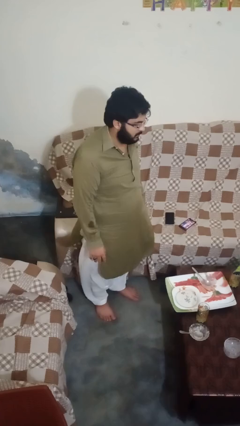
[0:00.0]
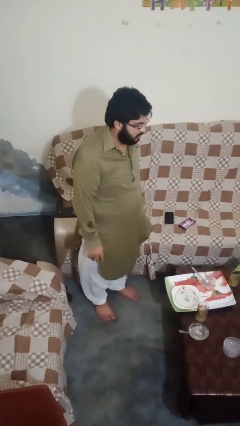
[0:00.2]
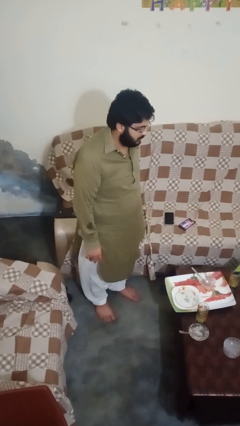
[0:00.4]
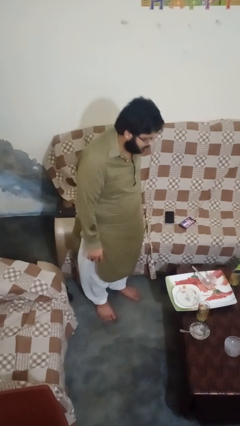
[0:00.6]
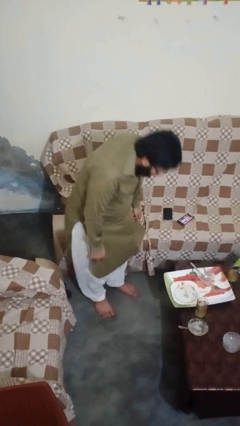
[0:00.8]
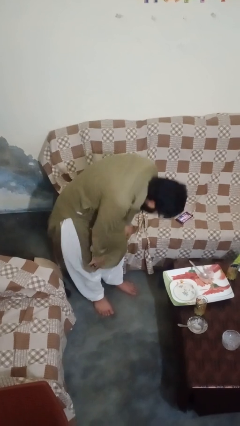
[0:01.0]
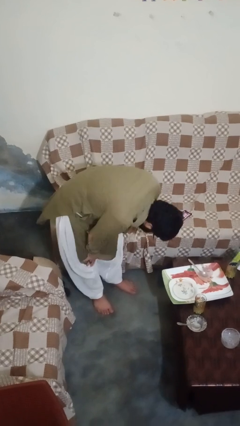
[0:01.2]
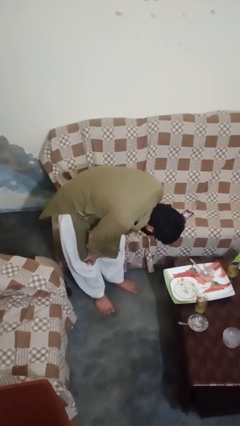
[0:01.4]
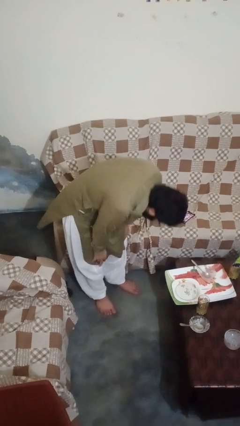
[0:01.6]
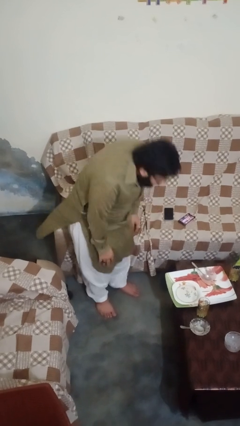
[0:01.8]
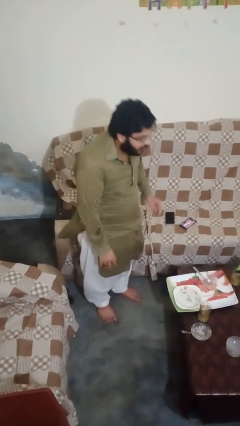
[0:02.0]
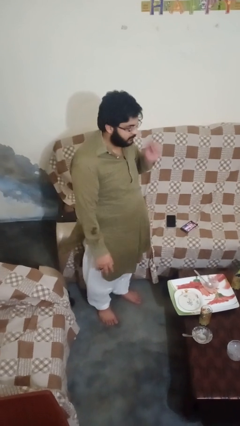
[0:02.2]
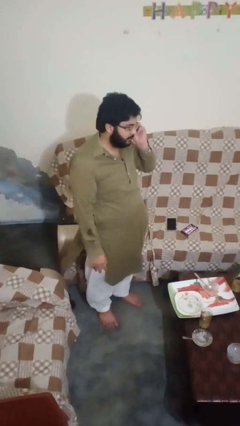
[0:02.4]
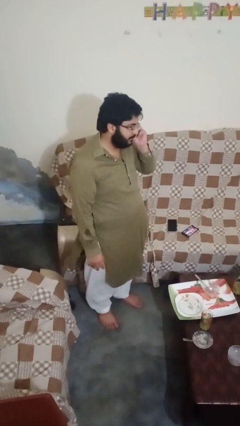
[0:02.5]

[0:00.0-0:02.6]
person bows

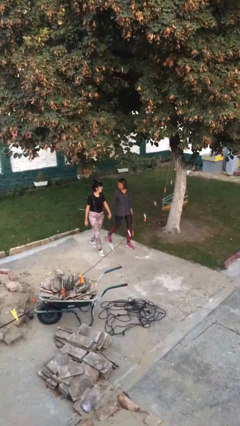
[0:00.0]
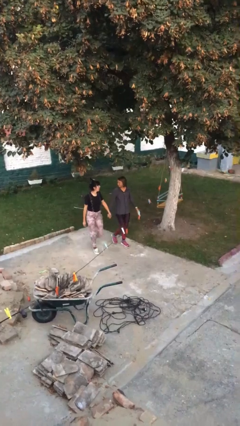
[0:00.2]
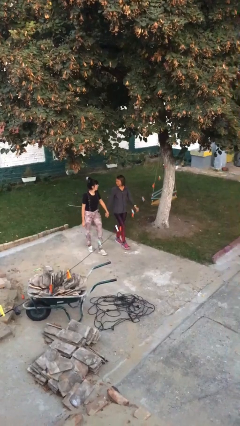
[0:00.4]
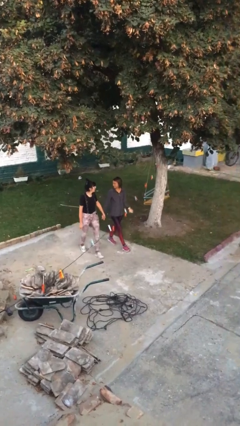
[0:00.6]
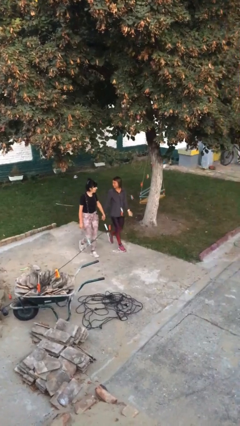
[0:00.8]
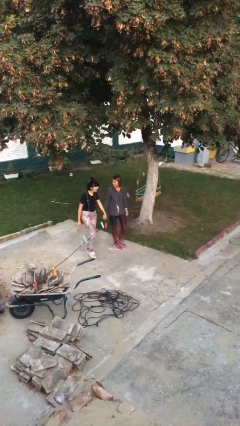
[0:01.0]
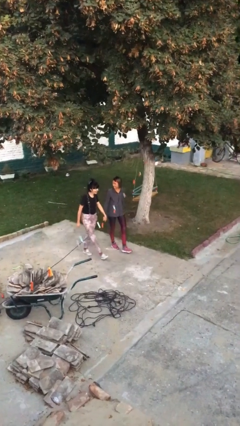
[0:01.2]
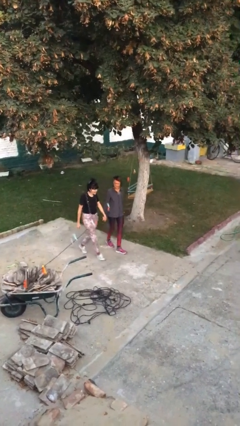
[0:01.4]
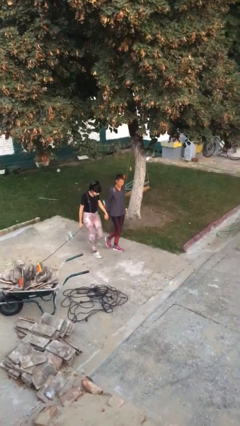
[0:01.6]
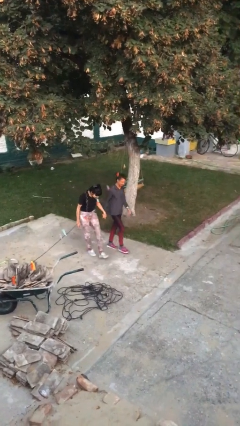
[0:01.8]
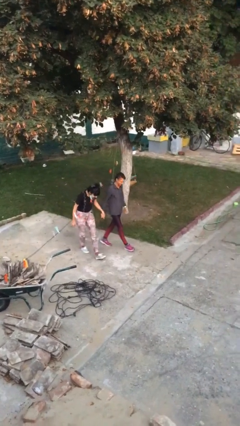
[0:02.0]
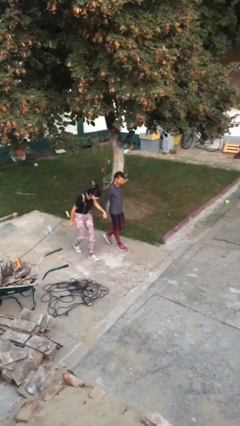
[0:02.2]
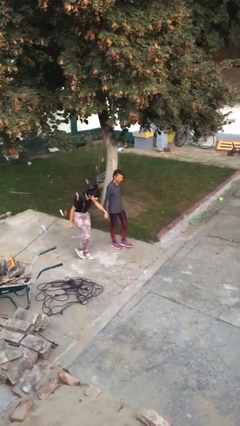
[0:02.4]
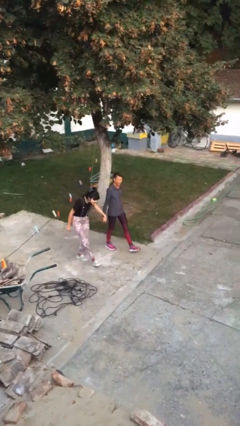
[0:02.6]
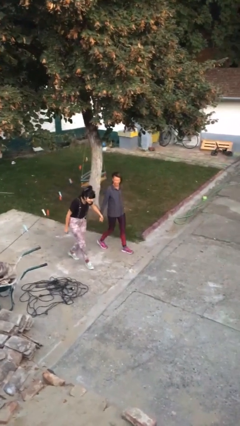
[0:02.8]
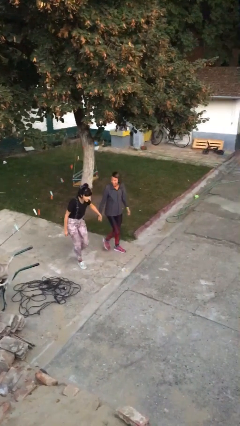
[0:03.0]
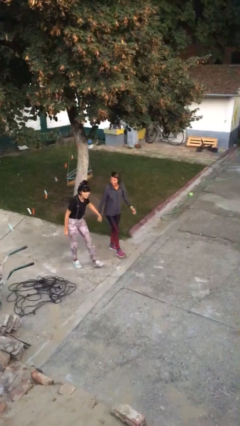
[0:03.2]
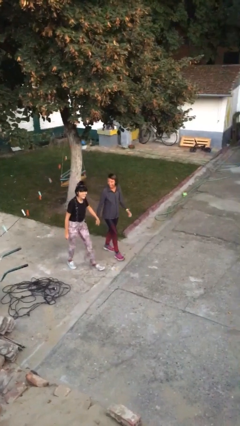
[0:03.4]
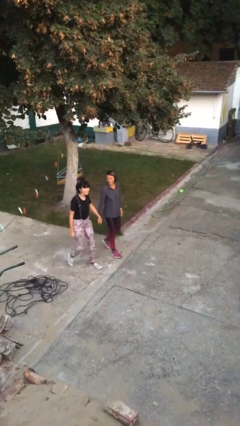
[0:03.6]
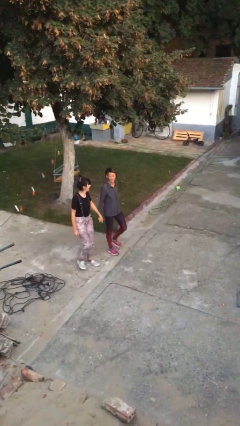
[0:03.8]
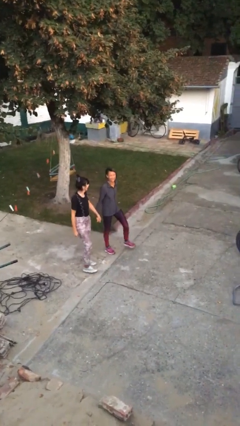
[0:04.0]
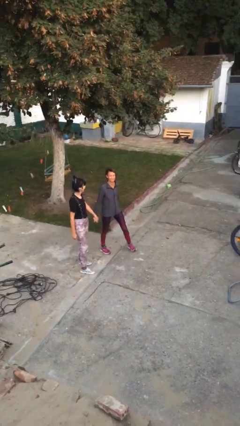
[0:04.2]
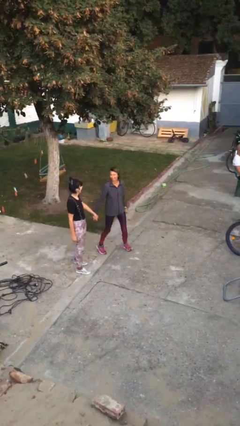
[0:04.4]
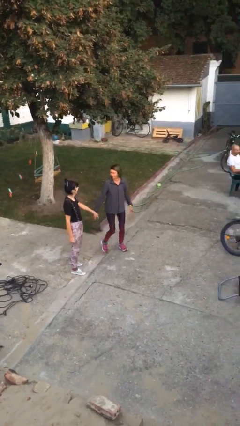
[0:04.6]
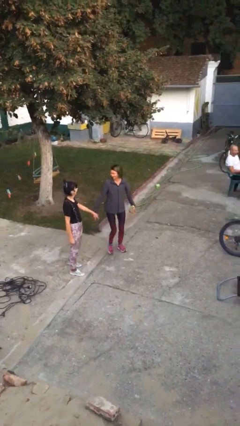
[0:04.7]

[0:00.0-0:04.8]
person holds hand

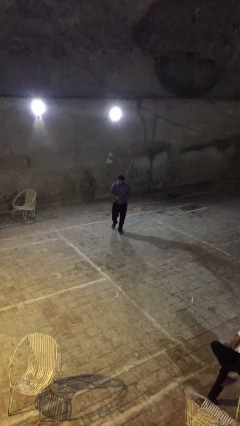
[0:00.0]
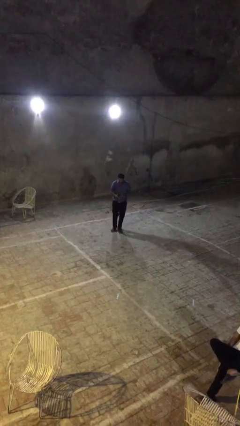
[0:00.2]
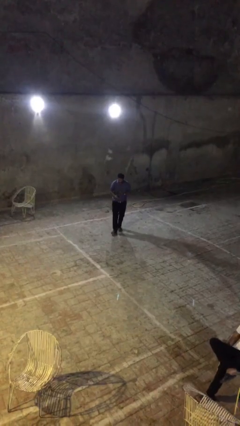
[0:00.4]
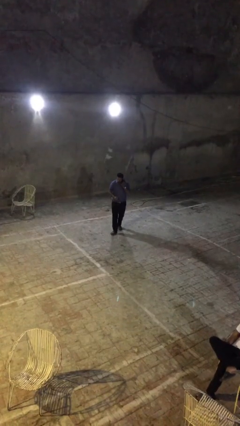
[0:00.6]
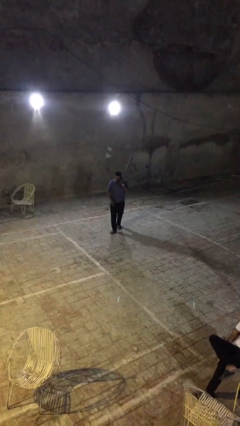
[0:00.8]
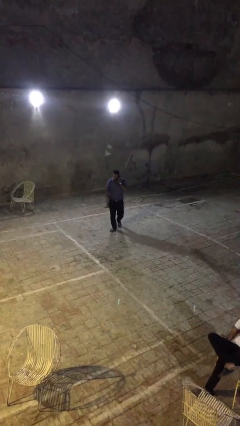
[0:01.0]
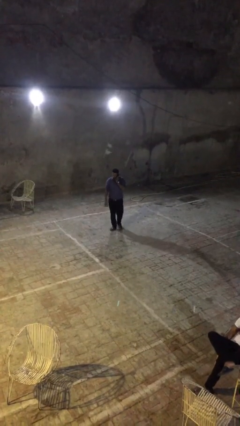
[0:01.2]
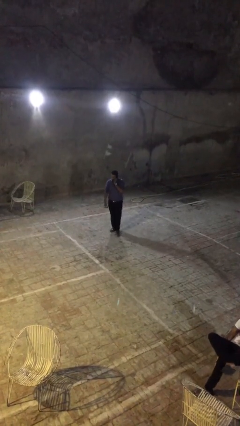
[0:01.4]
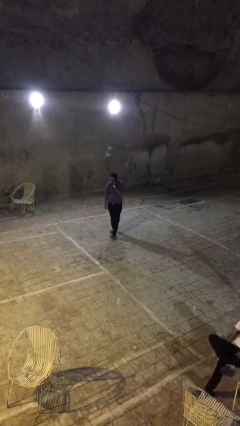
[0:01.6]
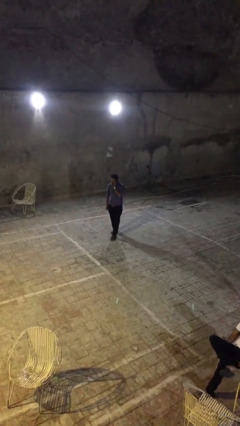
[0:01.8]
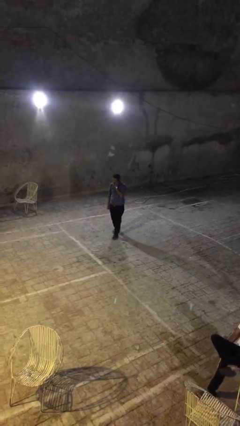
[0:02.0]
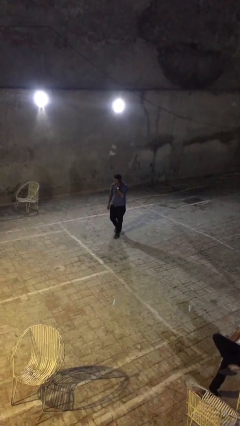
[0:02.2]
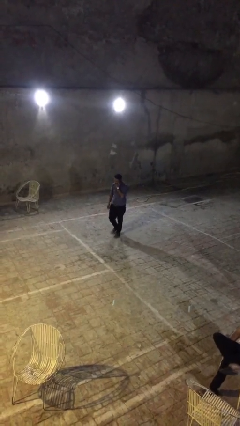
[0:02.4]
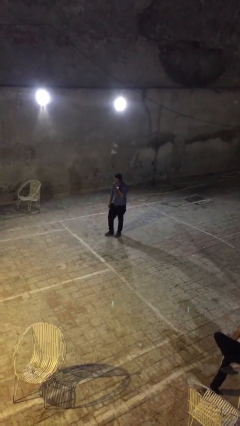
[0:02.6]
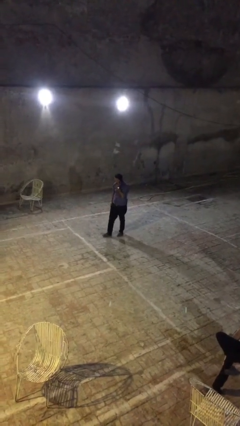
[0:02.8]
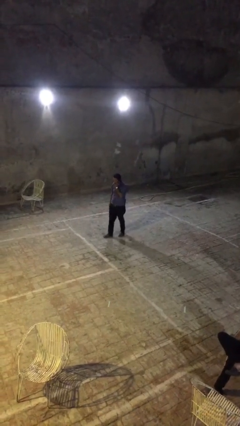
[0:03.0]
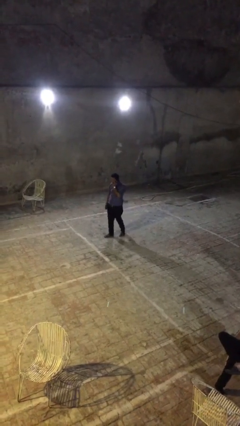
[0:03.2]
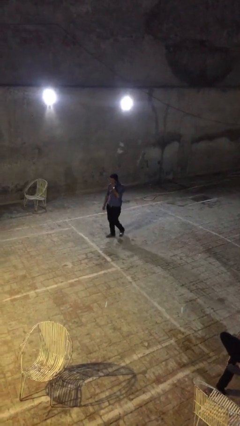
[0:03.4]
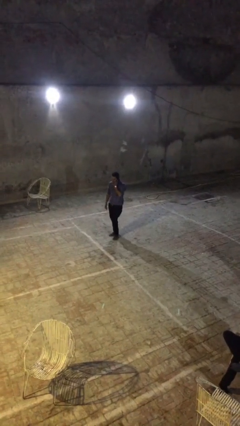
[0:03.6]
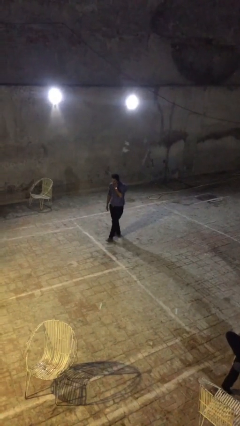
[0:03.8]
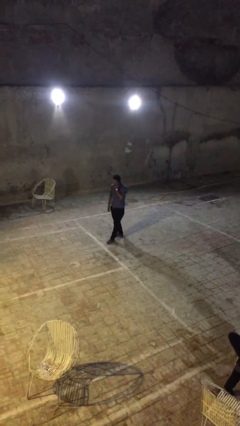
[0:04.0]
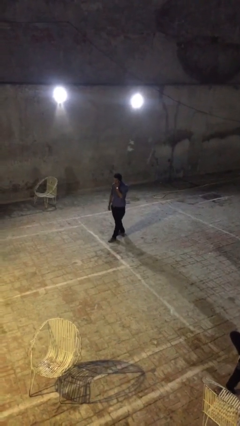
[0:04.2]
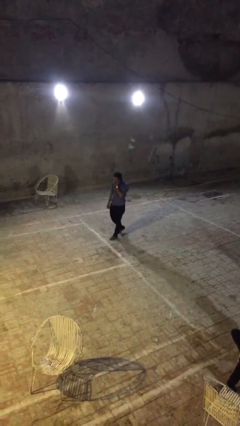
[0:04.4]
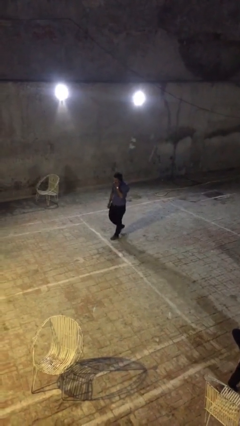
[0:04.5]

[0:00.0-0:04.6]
person talks on phone

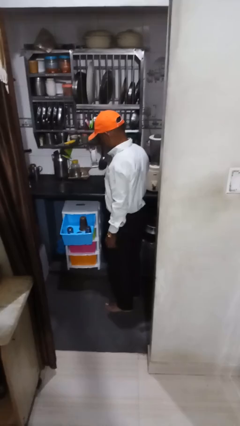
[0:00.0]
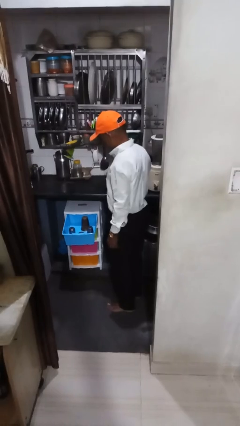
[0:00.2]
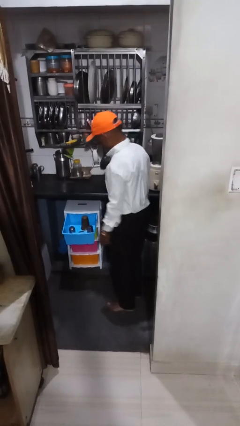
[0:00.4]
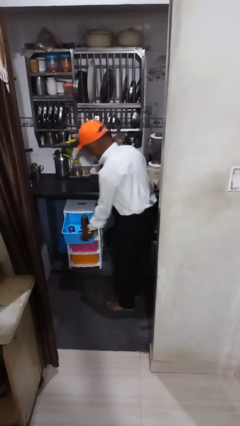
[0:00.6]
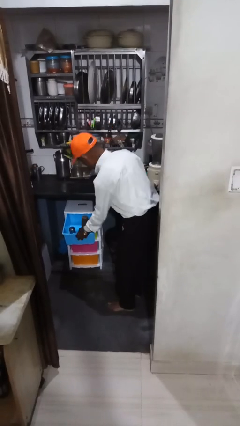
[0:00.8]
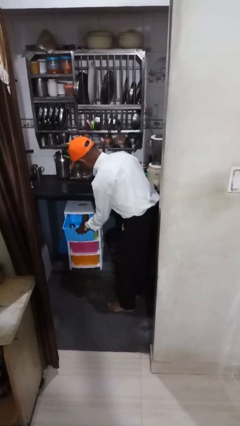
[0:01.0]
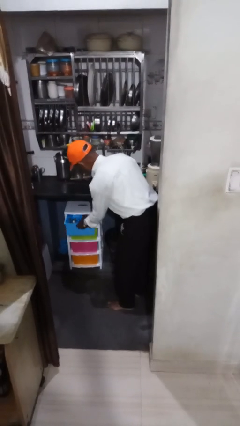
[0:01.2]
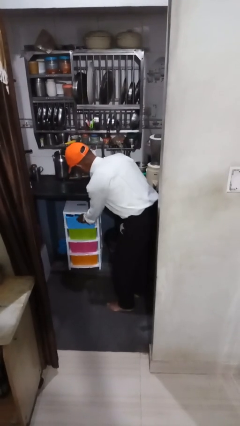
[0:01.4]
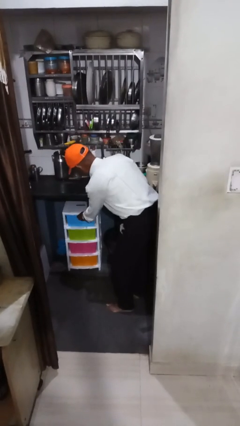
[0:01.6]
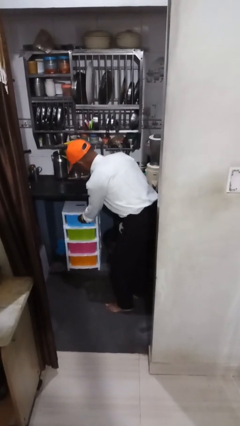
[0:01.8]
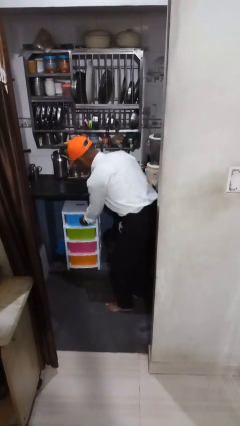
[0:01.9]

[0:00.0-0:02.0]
person closes kitchen drawer

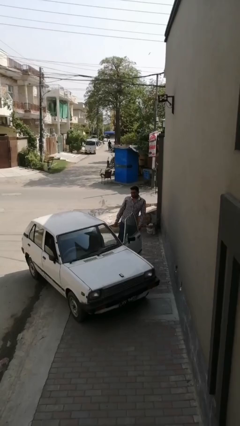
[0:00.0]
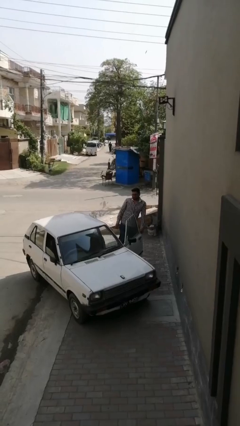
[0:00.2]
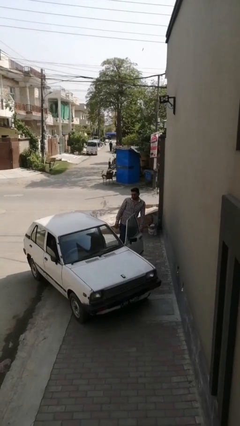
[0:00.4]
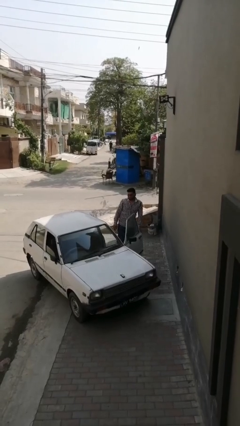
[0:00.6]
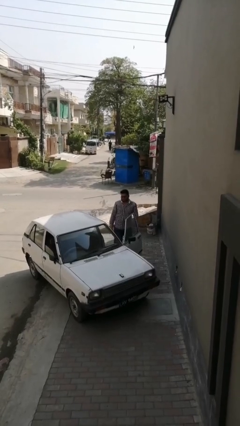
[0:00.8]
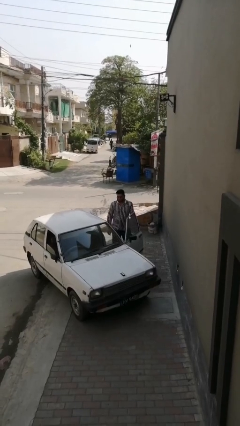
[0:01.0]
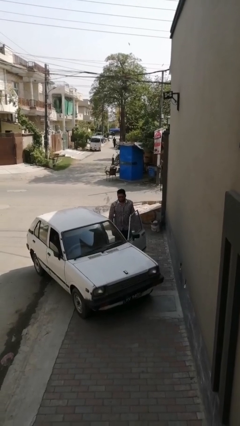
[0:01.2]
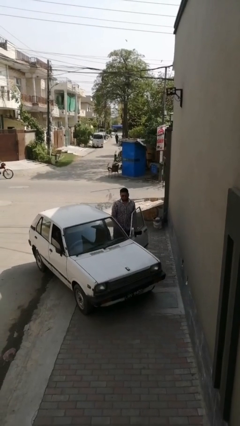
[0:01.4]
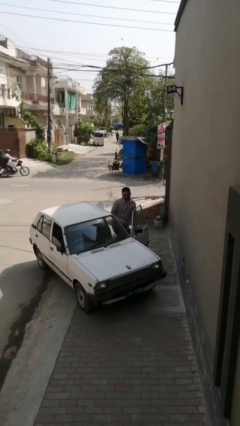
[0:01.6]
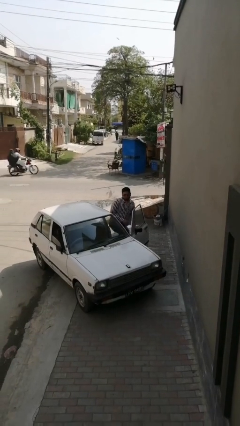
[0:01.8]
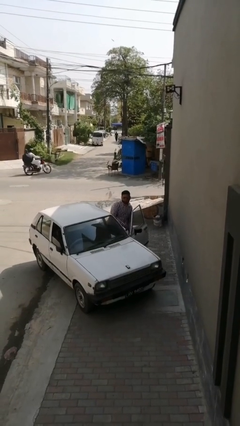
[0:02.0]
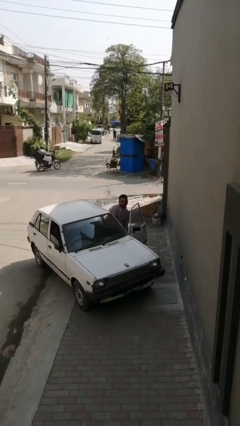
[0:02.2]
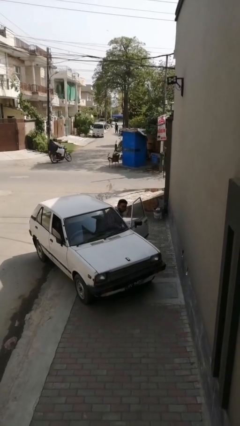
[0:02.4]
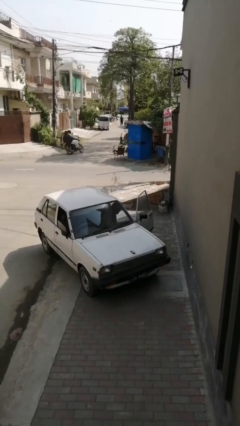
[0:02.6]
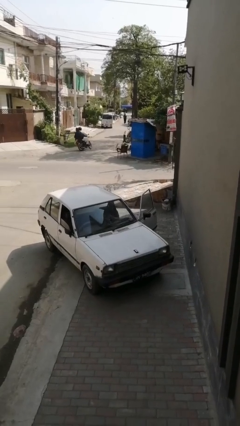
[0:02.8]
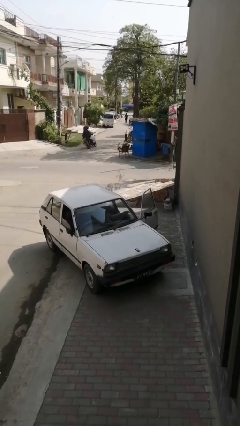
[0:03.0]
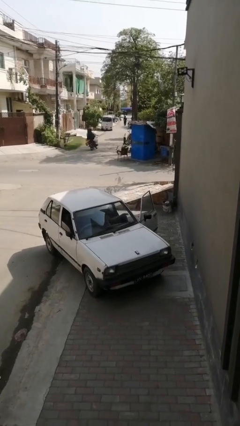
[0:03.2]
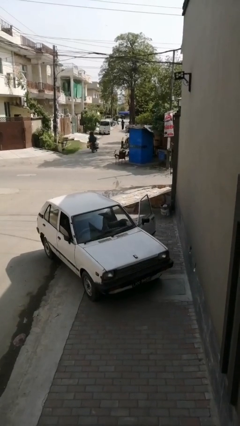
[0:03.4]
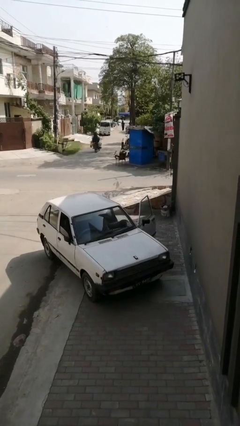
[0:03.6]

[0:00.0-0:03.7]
person enters car
